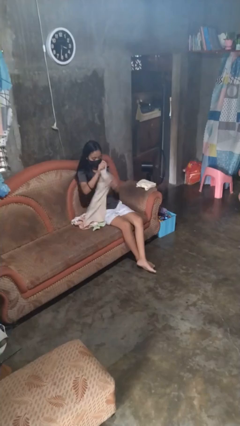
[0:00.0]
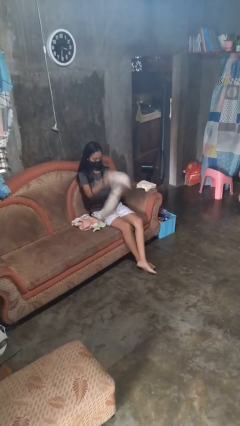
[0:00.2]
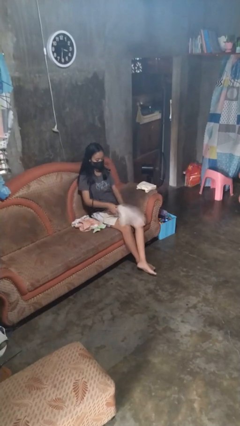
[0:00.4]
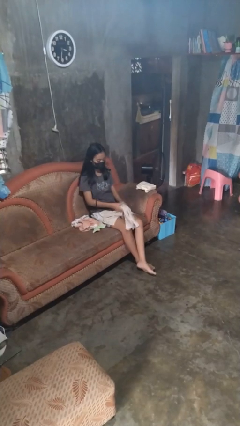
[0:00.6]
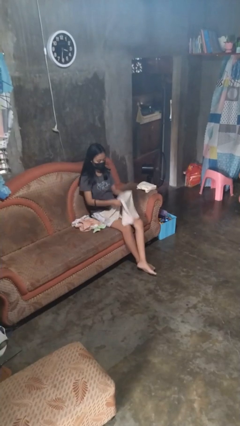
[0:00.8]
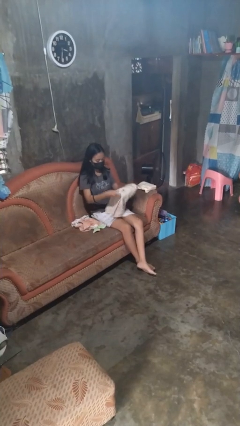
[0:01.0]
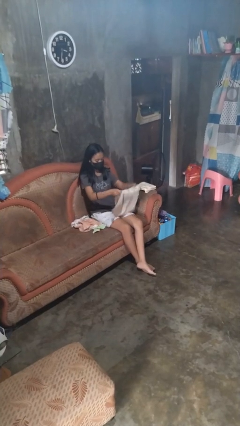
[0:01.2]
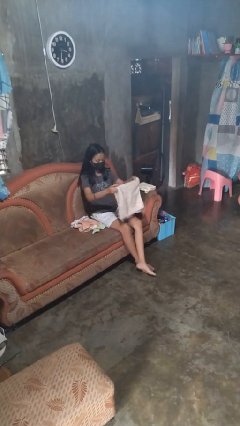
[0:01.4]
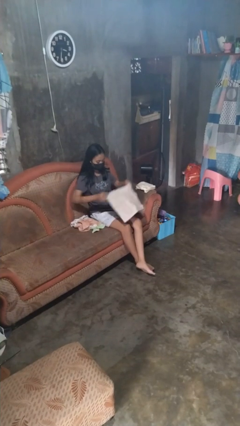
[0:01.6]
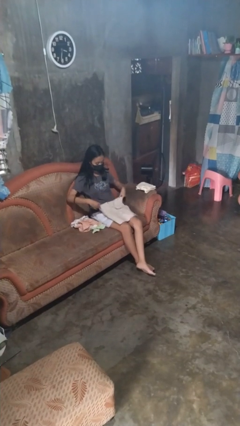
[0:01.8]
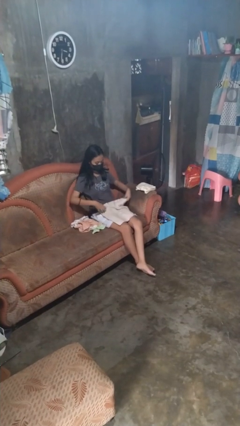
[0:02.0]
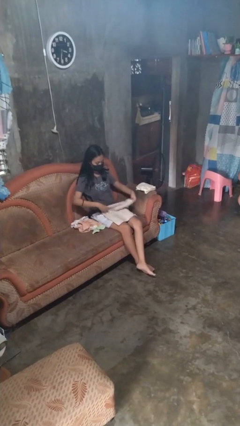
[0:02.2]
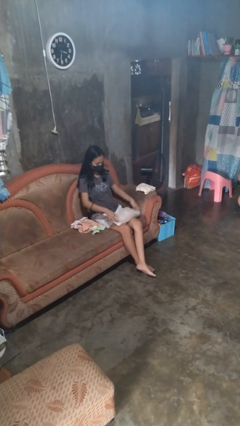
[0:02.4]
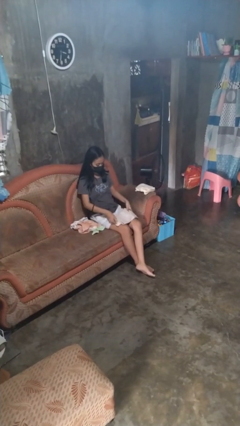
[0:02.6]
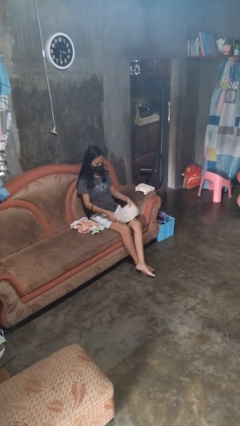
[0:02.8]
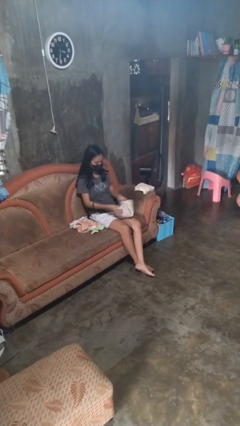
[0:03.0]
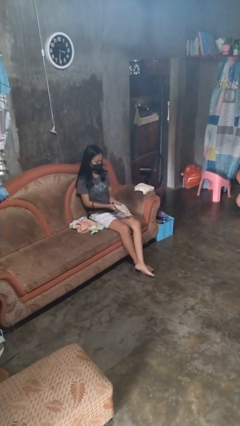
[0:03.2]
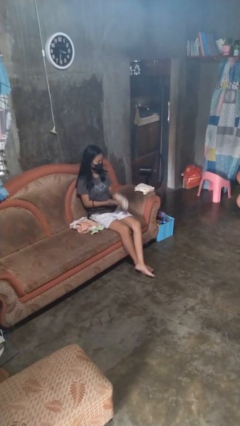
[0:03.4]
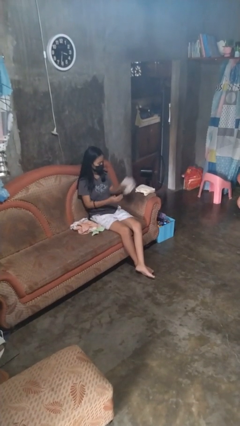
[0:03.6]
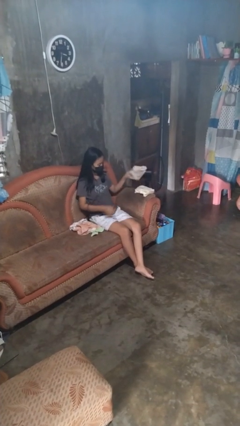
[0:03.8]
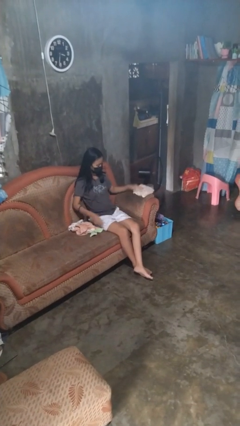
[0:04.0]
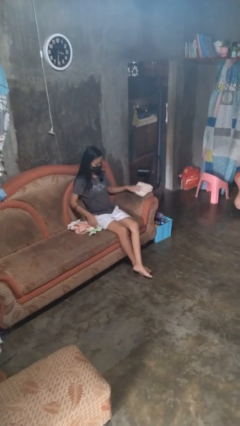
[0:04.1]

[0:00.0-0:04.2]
person folds towel

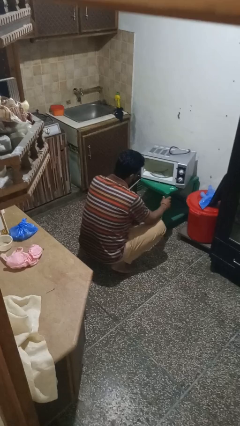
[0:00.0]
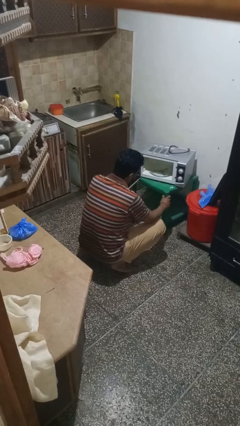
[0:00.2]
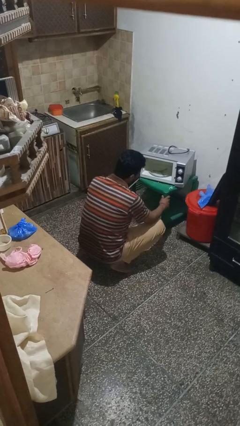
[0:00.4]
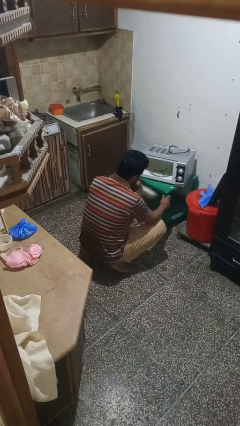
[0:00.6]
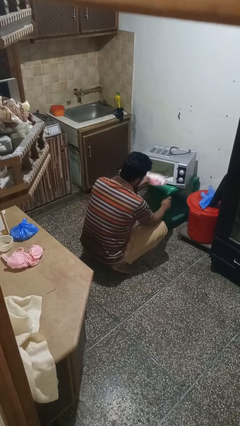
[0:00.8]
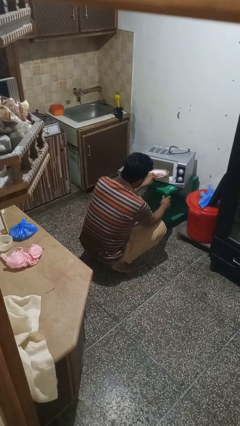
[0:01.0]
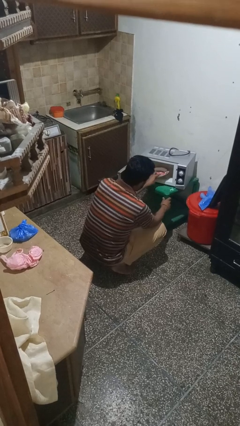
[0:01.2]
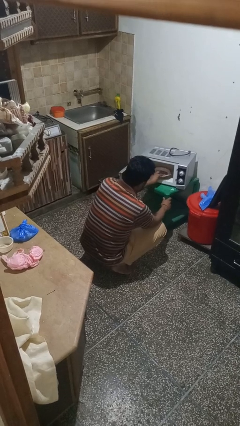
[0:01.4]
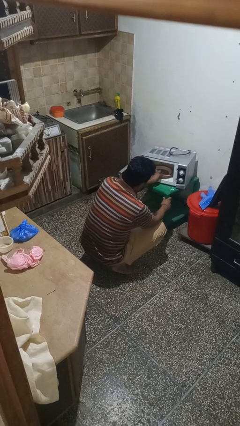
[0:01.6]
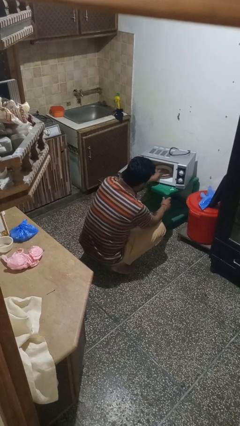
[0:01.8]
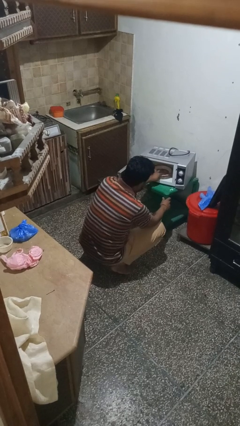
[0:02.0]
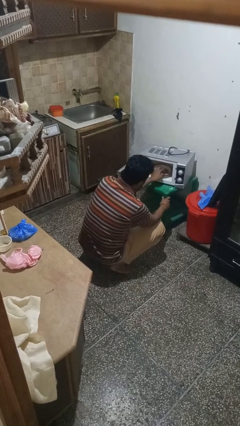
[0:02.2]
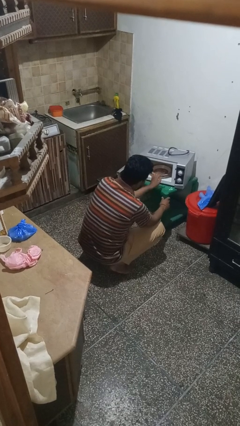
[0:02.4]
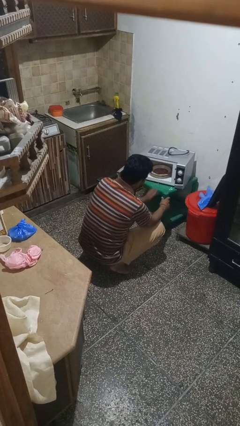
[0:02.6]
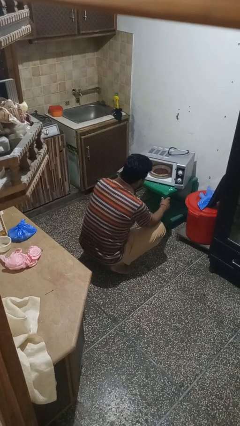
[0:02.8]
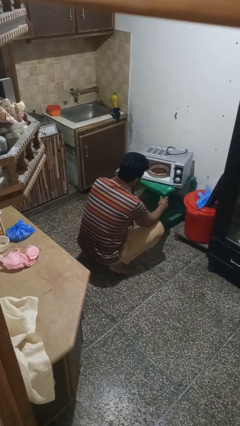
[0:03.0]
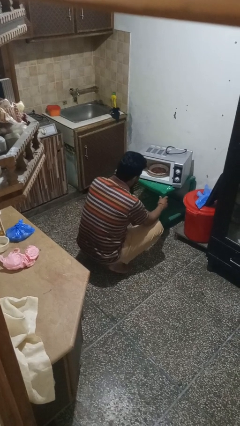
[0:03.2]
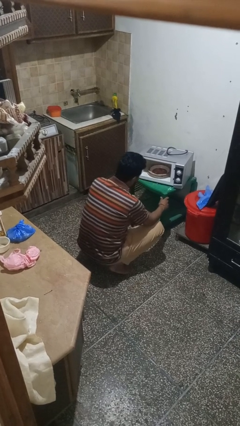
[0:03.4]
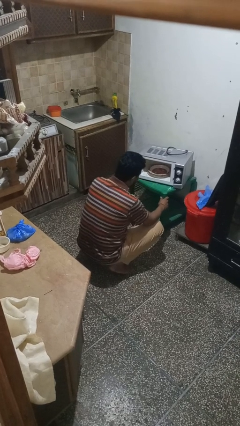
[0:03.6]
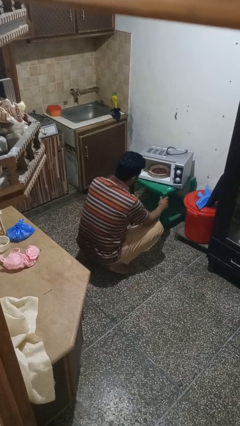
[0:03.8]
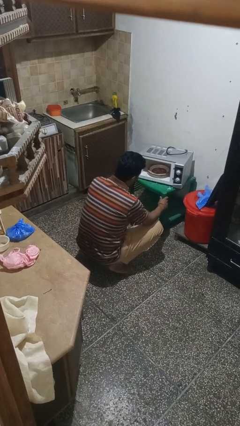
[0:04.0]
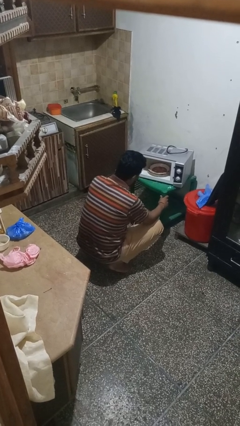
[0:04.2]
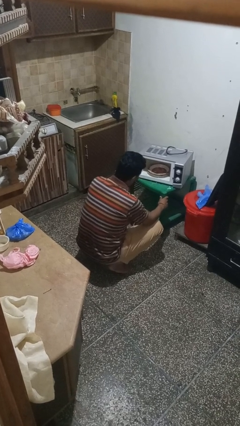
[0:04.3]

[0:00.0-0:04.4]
person puts object into microwave

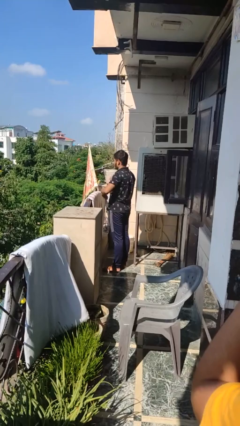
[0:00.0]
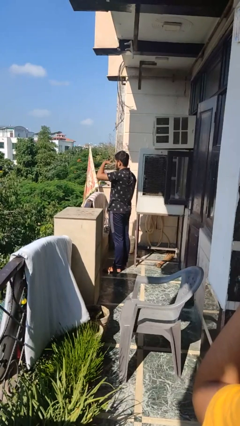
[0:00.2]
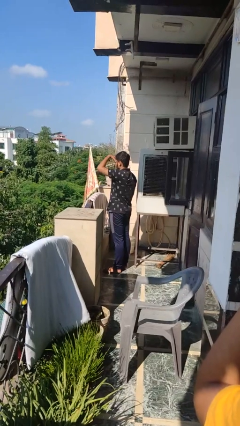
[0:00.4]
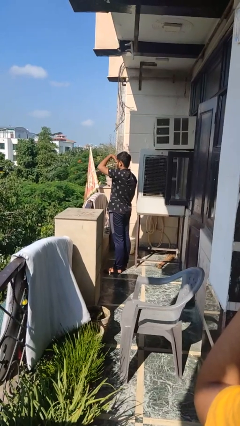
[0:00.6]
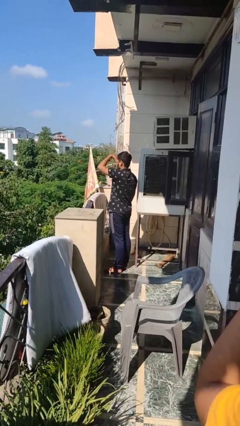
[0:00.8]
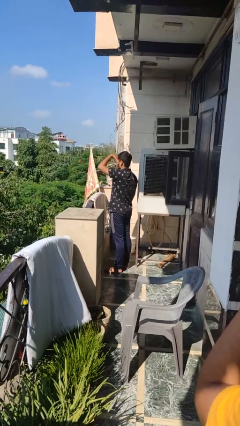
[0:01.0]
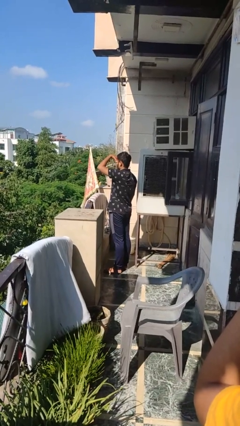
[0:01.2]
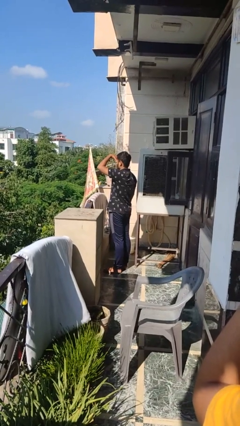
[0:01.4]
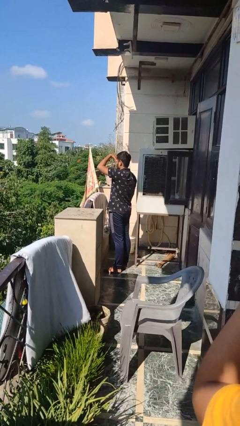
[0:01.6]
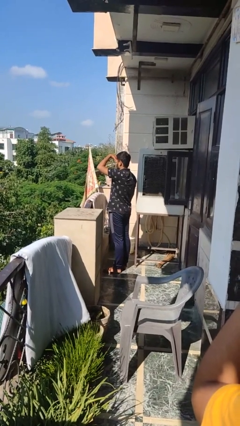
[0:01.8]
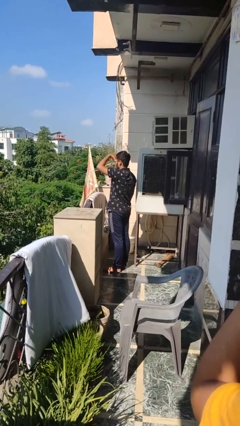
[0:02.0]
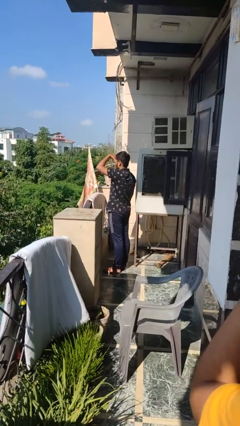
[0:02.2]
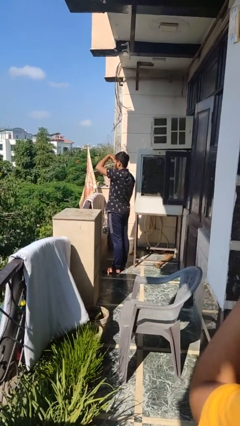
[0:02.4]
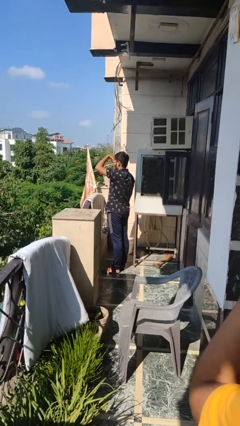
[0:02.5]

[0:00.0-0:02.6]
person shades eyes

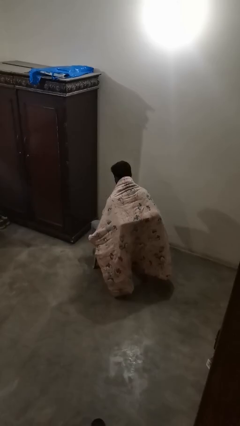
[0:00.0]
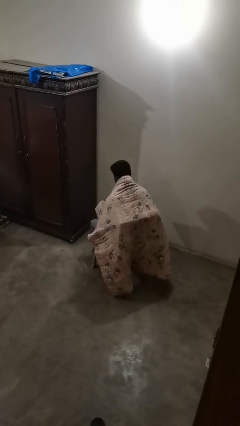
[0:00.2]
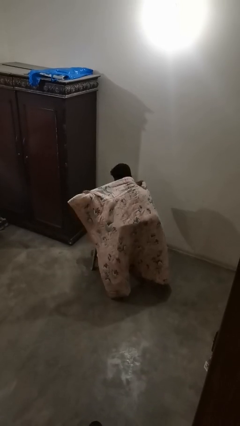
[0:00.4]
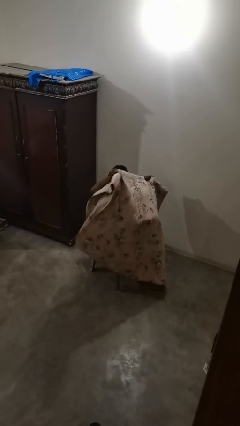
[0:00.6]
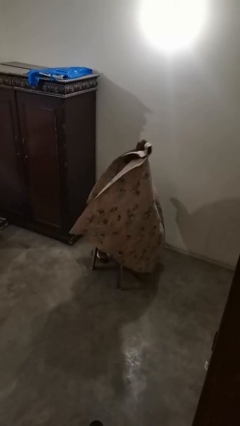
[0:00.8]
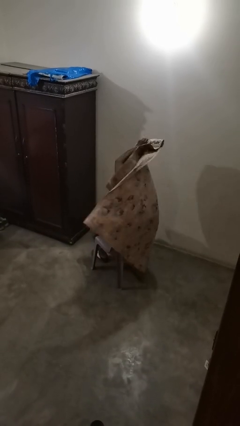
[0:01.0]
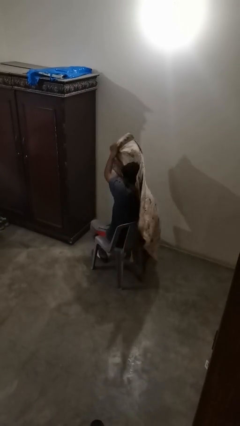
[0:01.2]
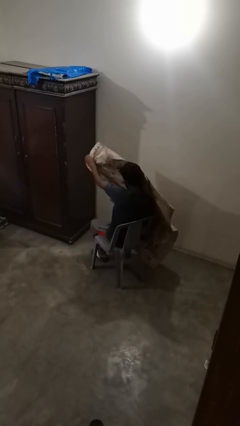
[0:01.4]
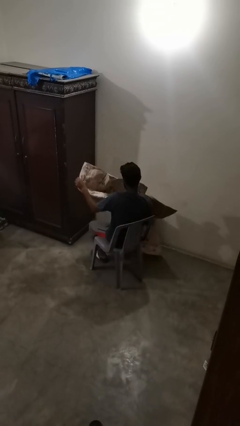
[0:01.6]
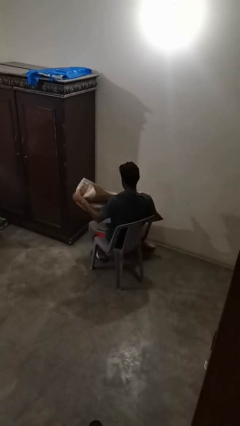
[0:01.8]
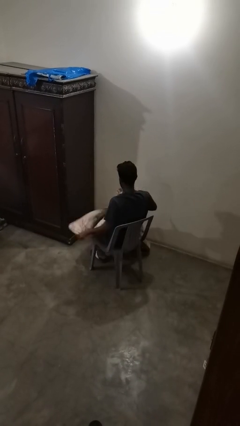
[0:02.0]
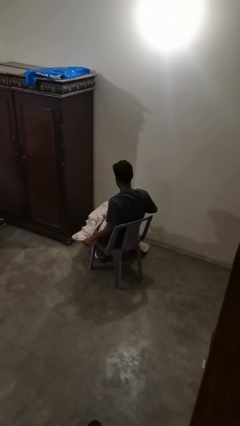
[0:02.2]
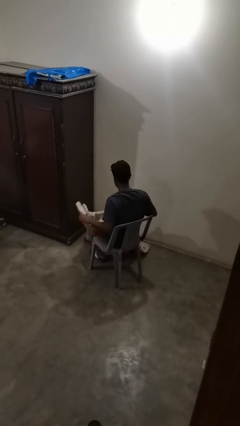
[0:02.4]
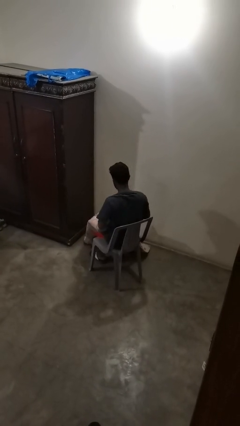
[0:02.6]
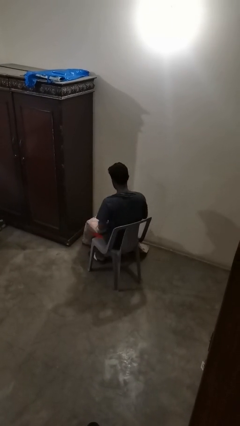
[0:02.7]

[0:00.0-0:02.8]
person uncovers with blanket

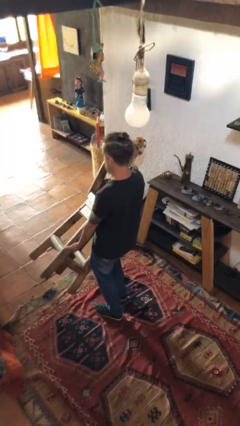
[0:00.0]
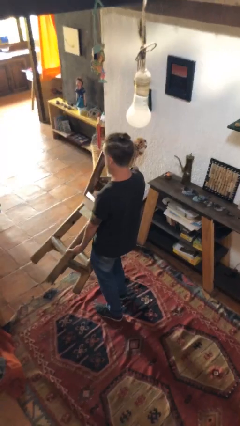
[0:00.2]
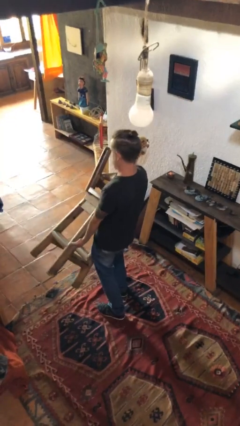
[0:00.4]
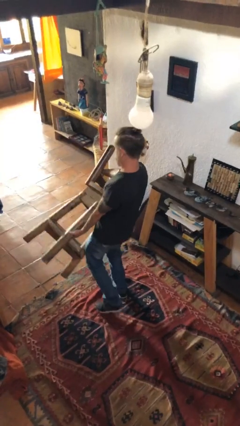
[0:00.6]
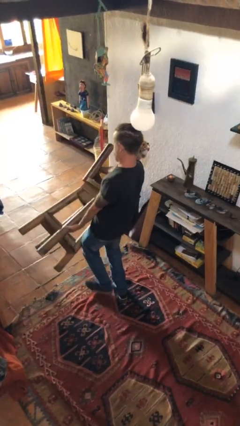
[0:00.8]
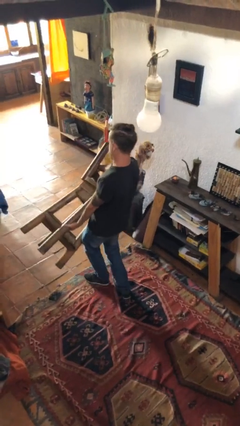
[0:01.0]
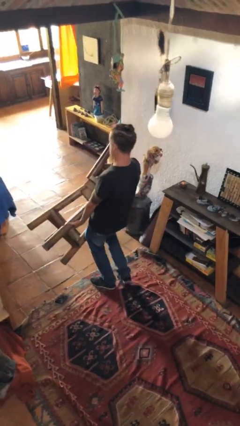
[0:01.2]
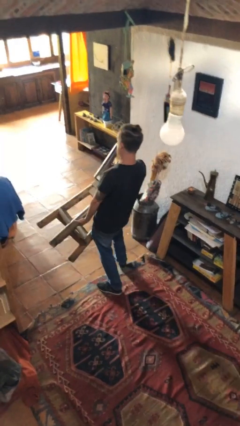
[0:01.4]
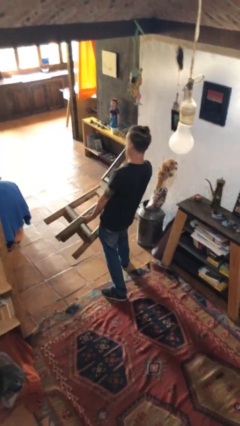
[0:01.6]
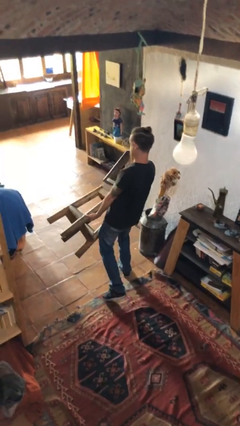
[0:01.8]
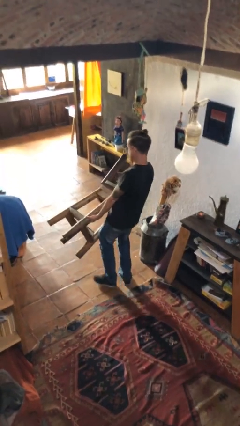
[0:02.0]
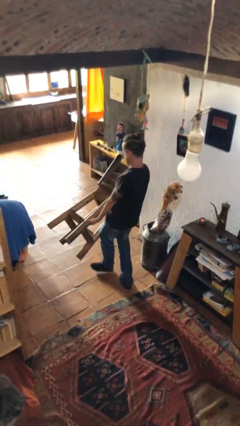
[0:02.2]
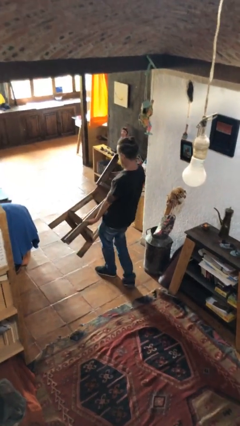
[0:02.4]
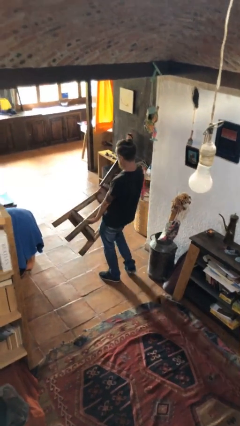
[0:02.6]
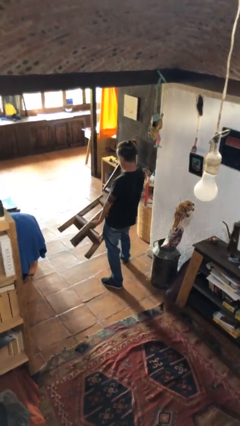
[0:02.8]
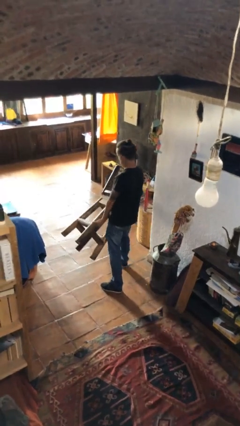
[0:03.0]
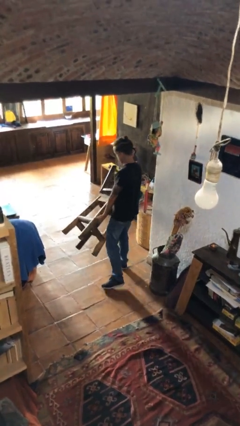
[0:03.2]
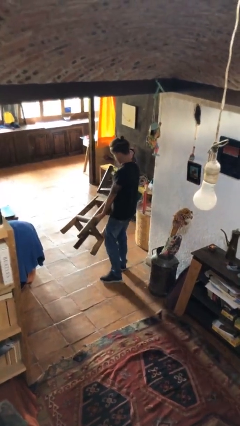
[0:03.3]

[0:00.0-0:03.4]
person carries heavy object
